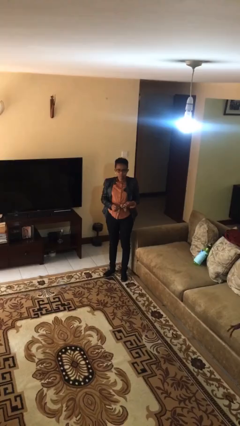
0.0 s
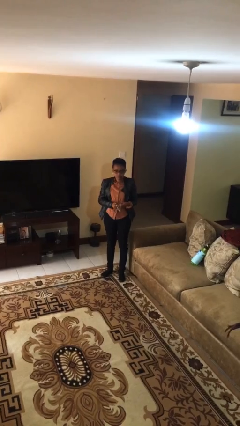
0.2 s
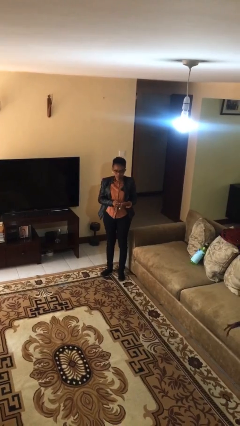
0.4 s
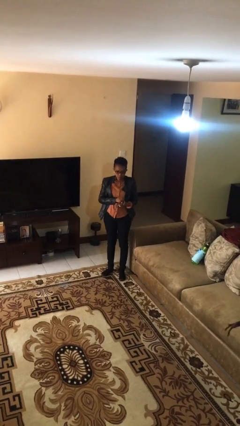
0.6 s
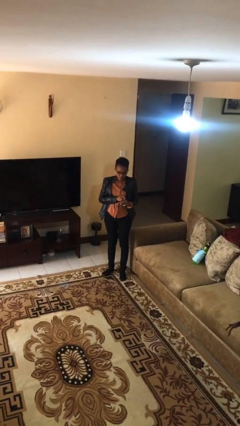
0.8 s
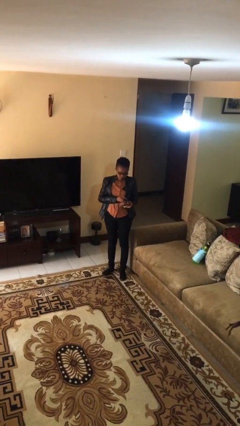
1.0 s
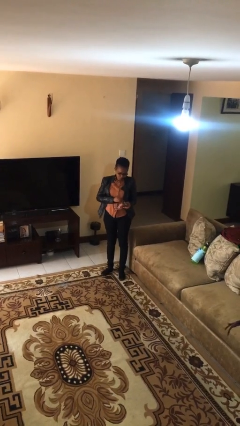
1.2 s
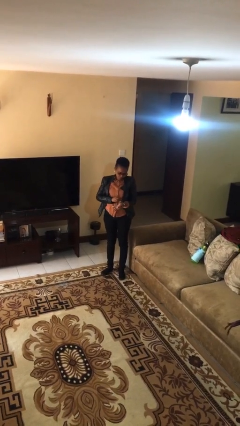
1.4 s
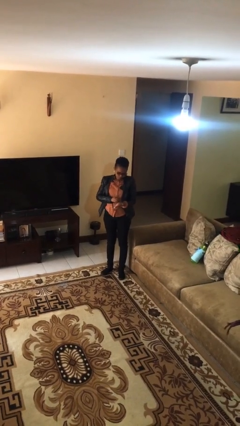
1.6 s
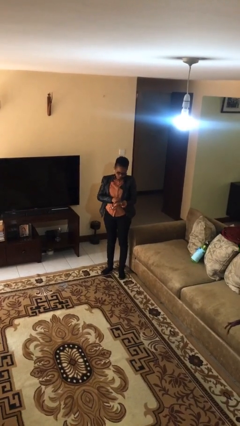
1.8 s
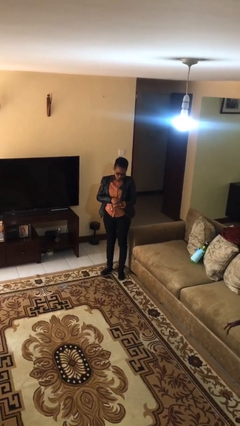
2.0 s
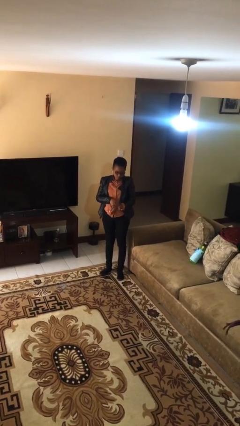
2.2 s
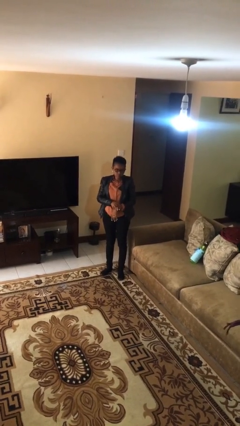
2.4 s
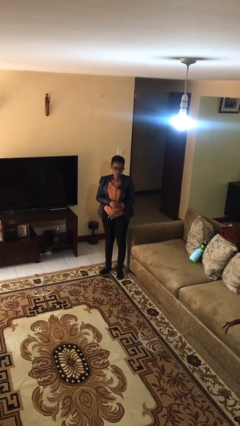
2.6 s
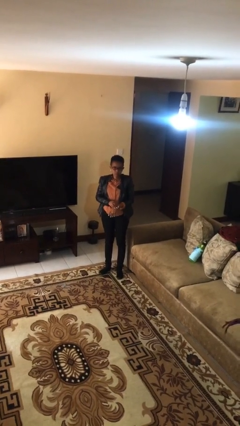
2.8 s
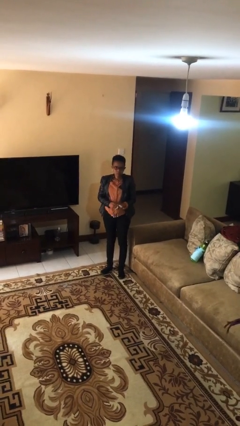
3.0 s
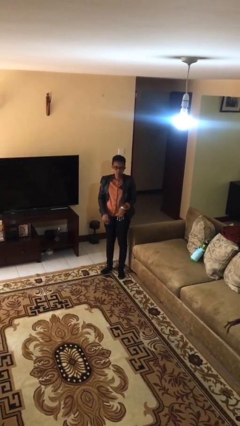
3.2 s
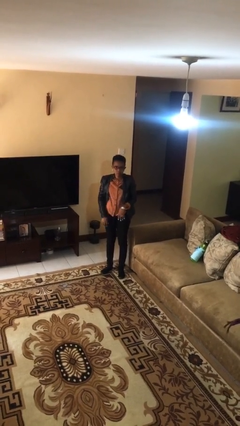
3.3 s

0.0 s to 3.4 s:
person puts on wristwatch

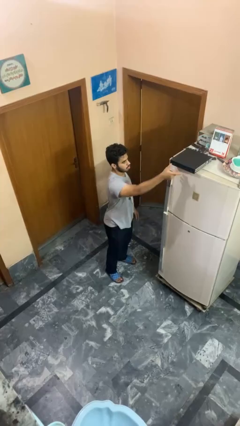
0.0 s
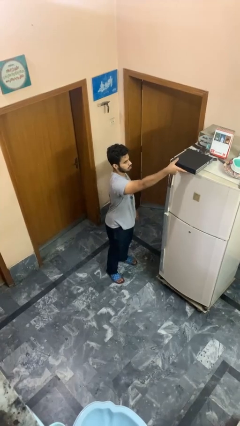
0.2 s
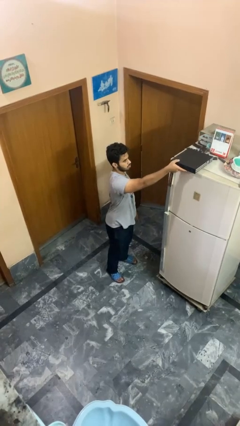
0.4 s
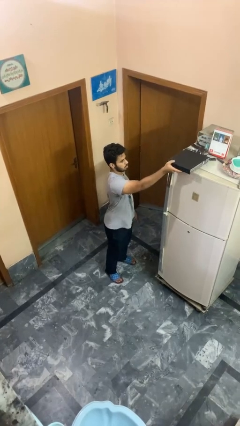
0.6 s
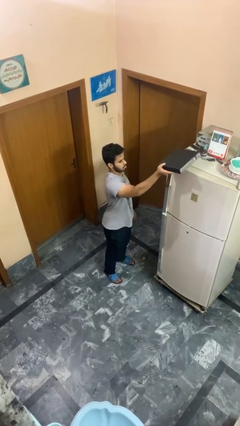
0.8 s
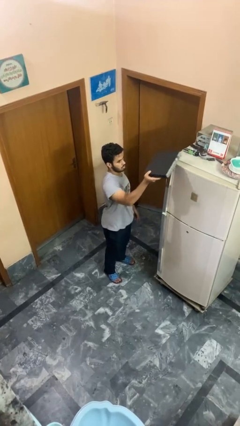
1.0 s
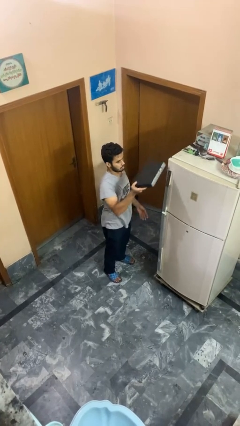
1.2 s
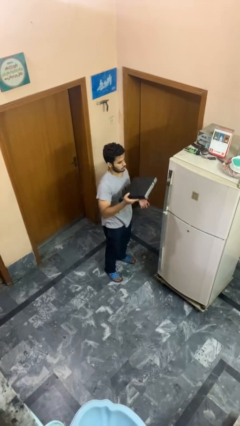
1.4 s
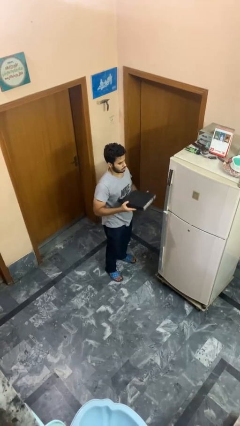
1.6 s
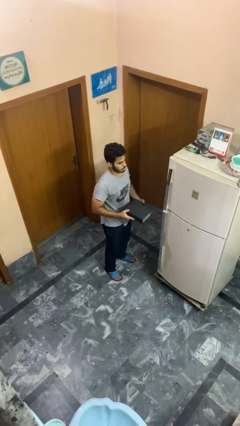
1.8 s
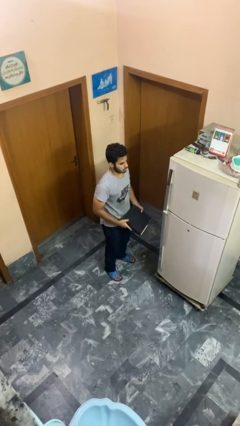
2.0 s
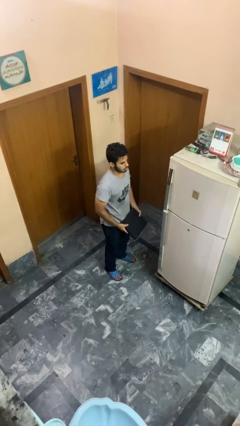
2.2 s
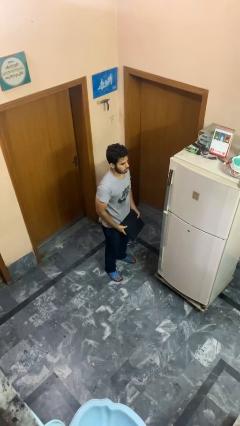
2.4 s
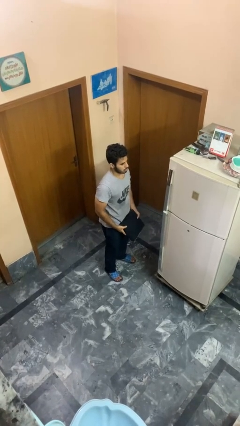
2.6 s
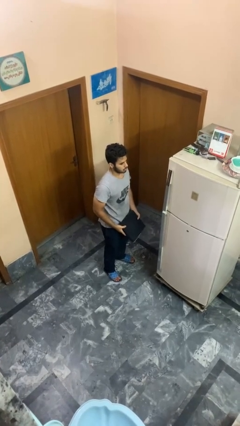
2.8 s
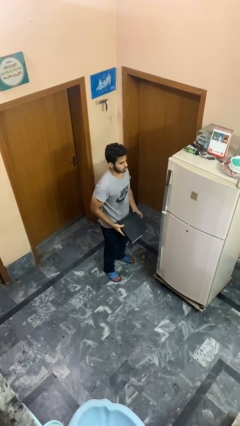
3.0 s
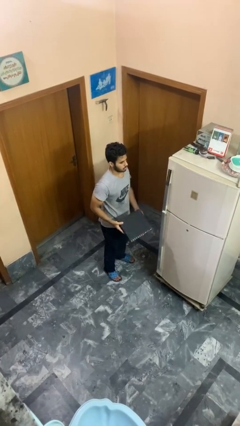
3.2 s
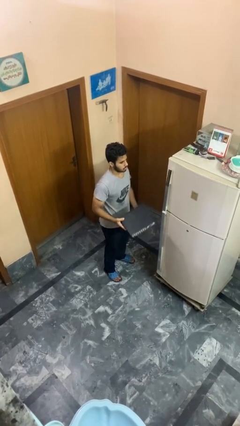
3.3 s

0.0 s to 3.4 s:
person picks up object from countertop

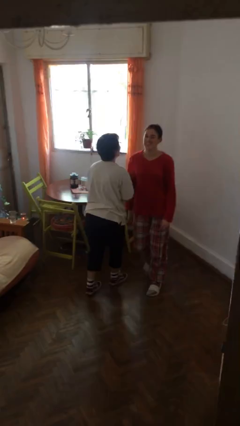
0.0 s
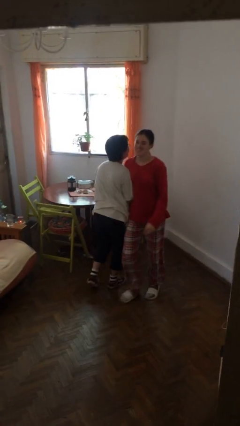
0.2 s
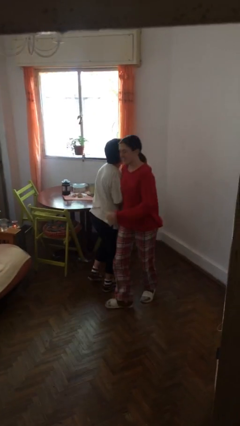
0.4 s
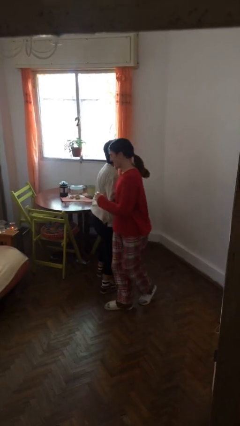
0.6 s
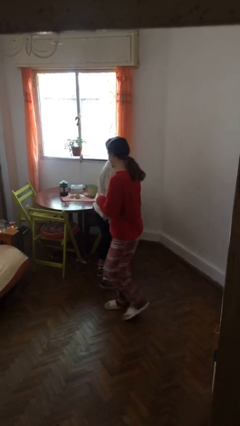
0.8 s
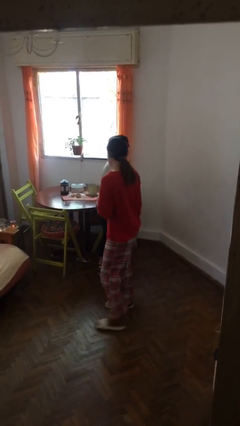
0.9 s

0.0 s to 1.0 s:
person bumps into person

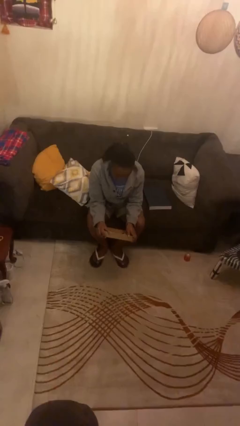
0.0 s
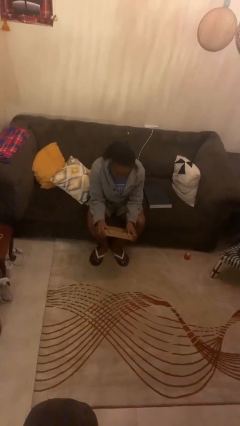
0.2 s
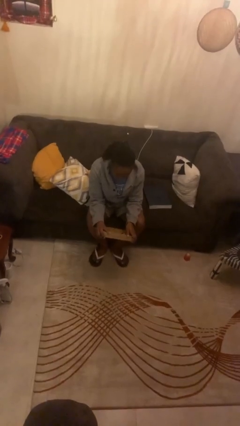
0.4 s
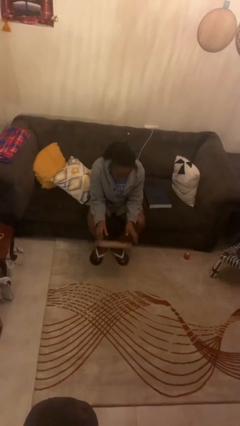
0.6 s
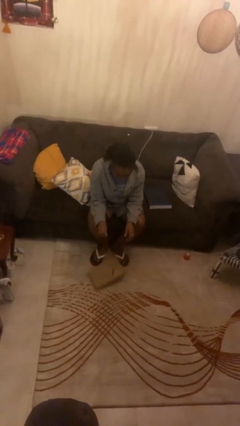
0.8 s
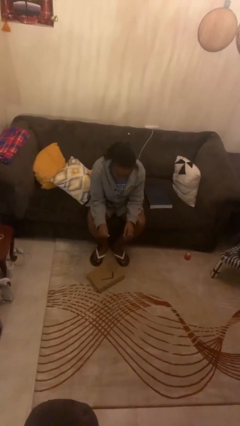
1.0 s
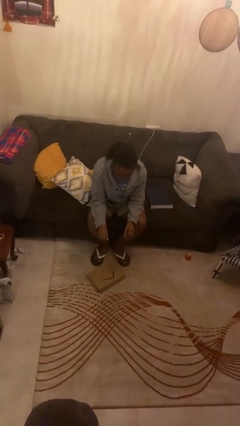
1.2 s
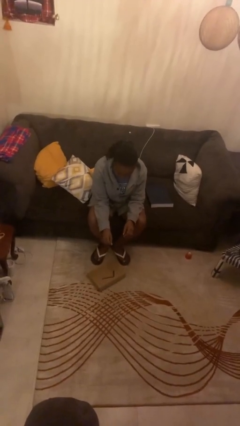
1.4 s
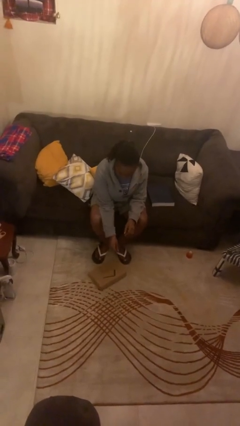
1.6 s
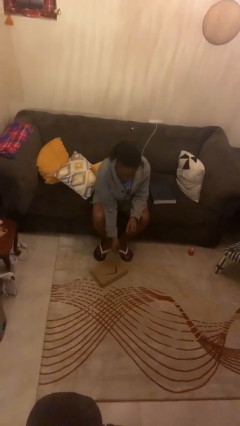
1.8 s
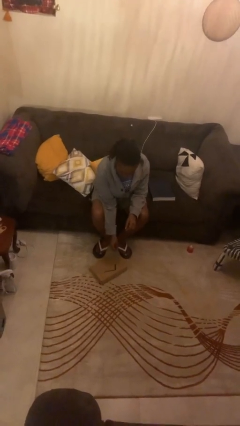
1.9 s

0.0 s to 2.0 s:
person drops object

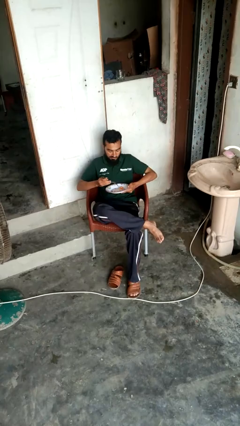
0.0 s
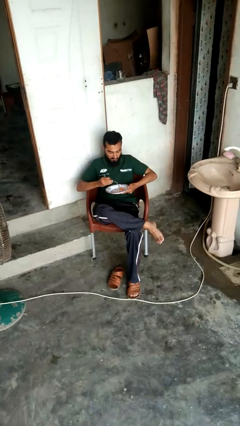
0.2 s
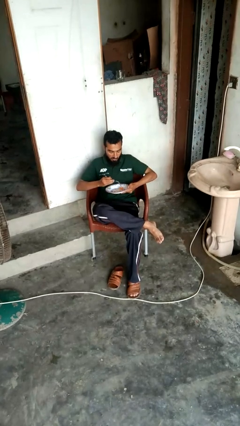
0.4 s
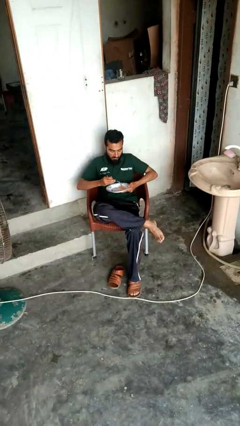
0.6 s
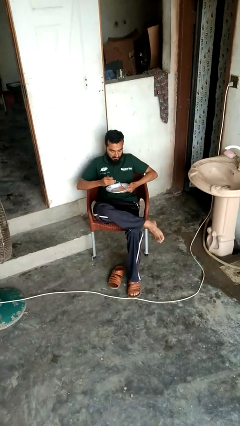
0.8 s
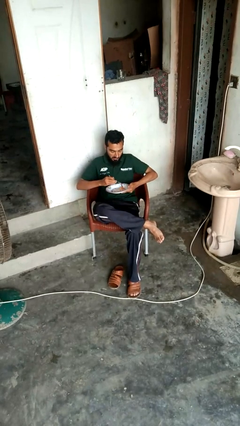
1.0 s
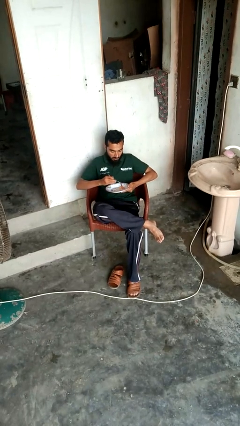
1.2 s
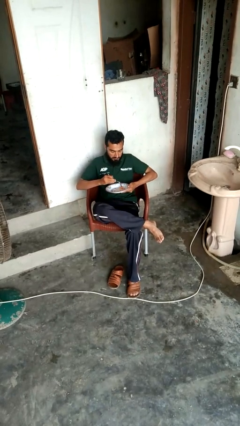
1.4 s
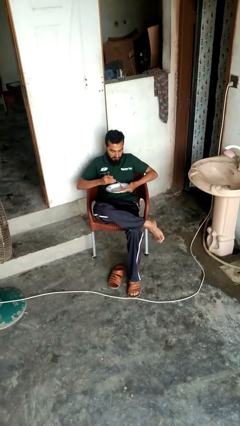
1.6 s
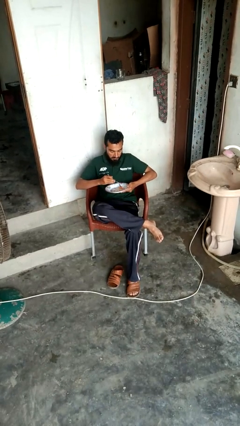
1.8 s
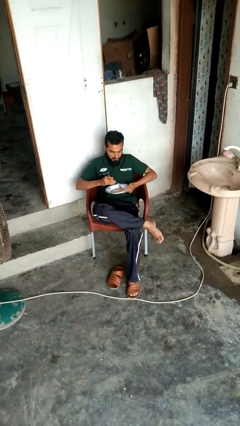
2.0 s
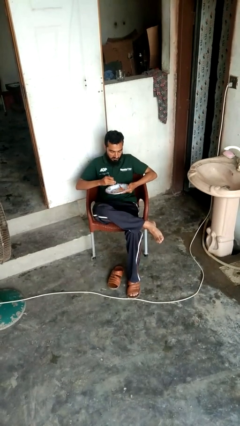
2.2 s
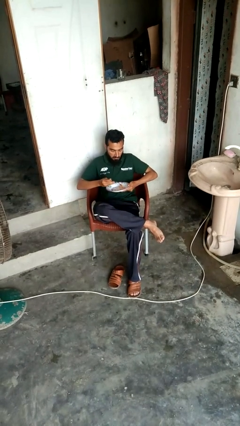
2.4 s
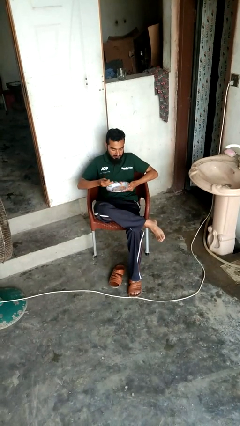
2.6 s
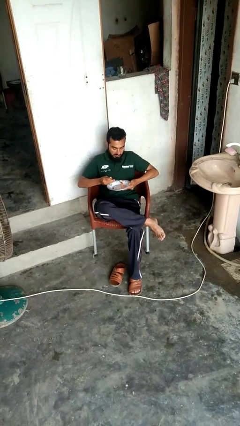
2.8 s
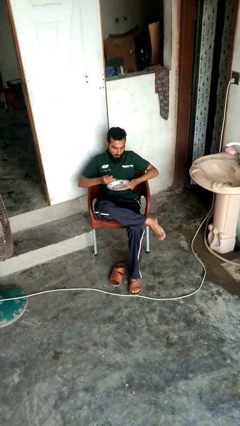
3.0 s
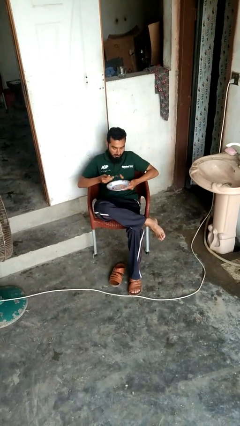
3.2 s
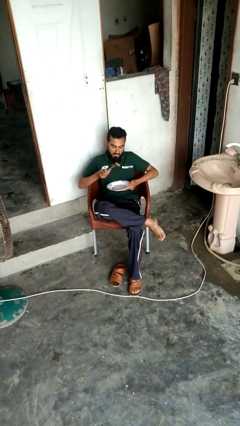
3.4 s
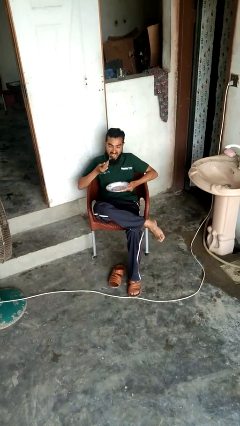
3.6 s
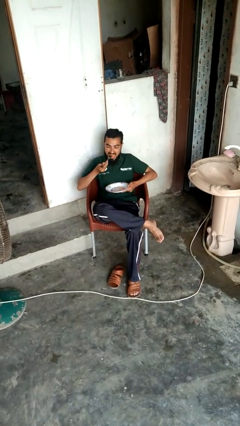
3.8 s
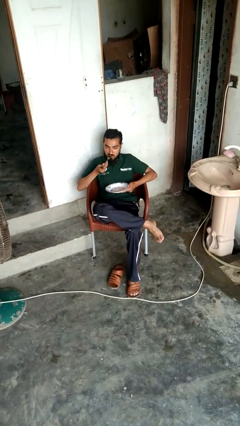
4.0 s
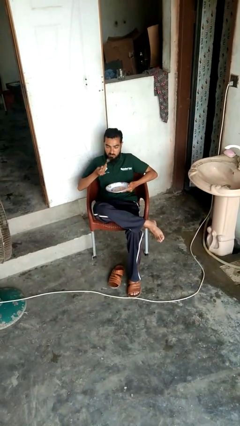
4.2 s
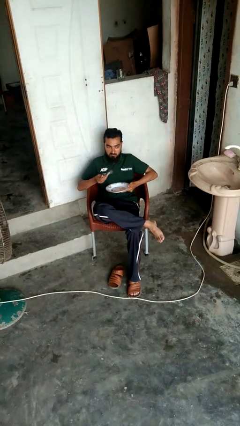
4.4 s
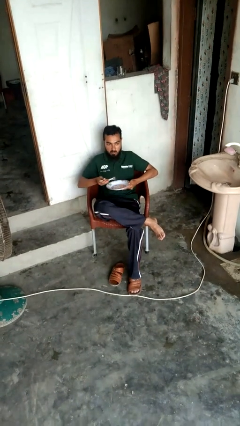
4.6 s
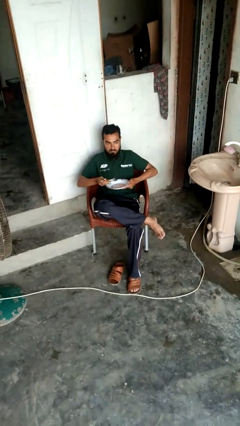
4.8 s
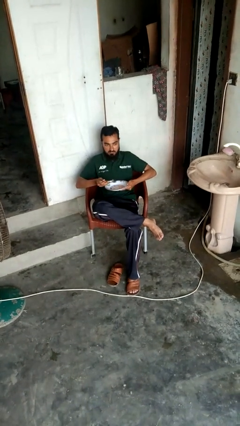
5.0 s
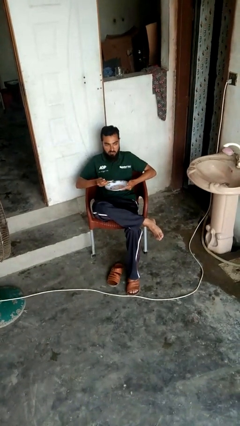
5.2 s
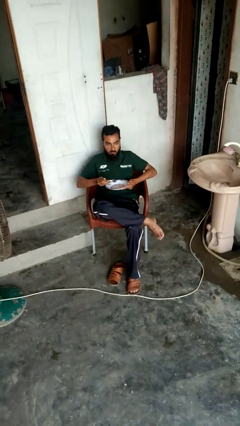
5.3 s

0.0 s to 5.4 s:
person eats with utensil

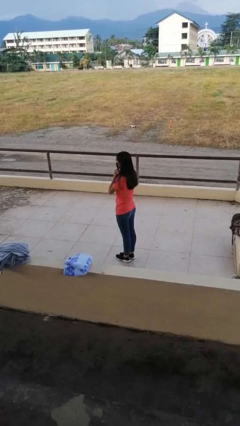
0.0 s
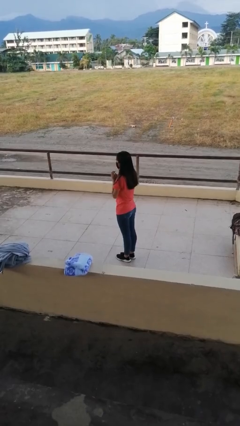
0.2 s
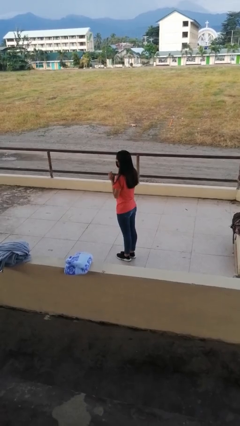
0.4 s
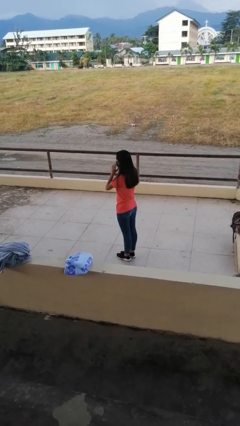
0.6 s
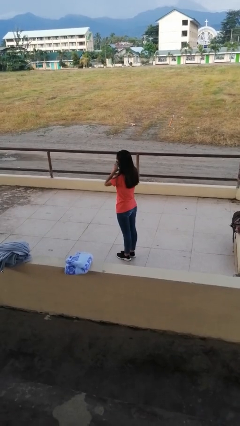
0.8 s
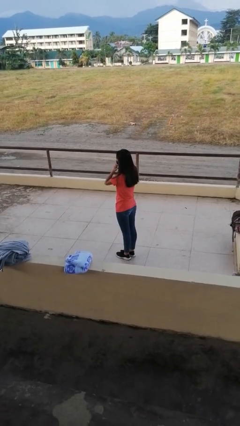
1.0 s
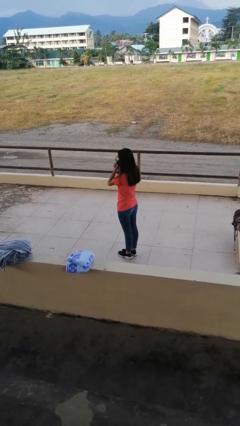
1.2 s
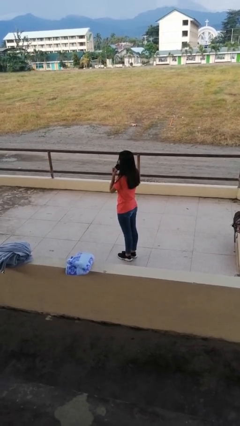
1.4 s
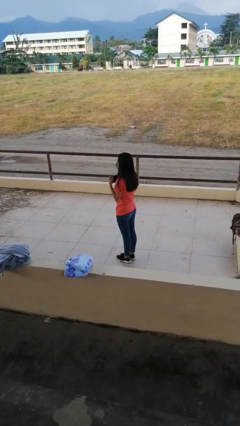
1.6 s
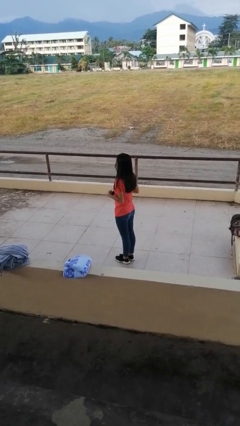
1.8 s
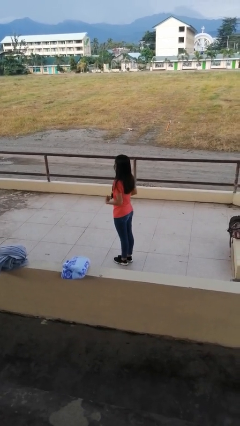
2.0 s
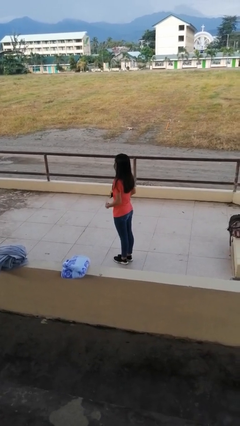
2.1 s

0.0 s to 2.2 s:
person takes off facemask

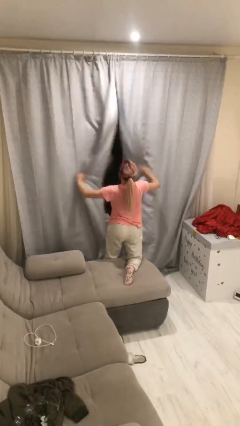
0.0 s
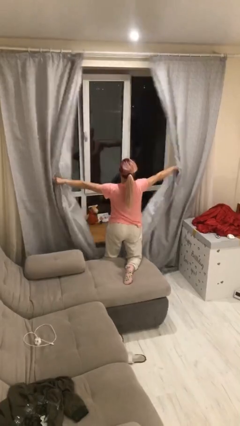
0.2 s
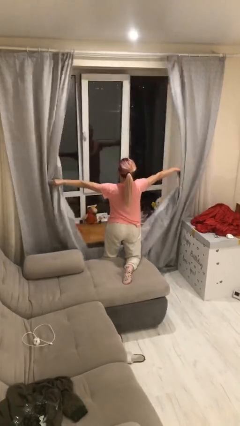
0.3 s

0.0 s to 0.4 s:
person opens curtains
